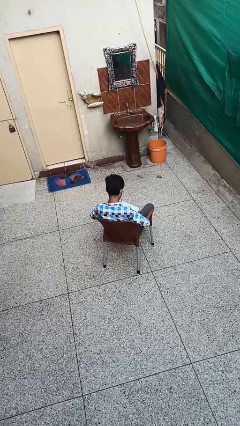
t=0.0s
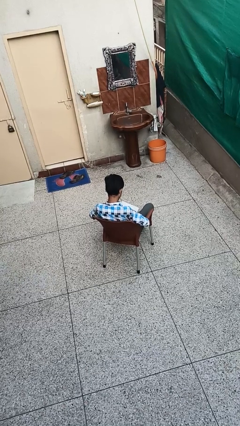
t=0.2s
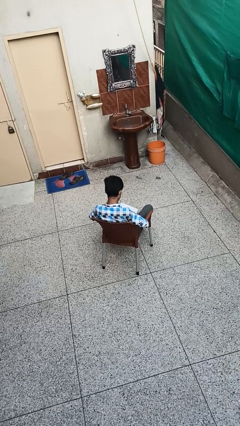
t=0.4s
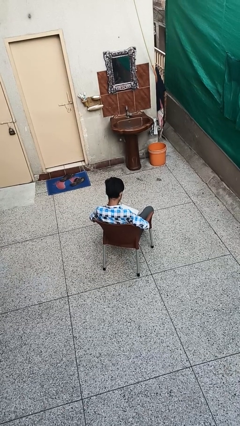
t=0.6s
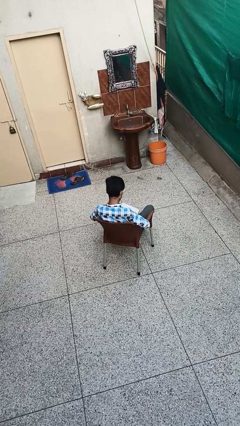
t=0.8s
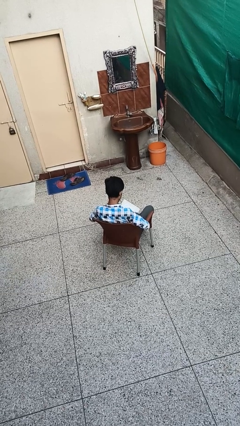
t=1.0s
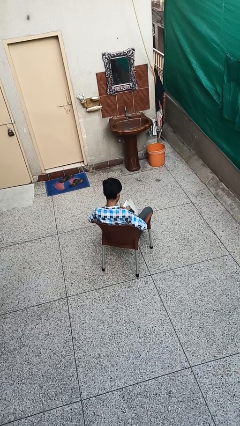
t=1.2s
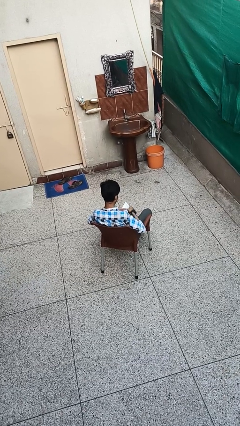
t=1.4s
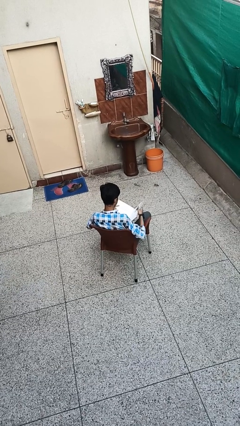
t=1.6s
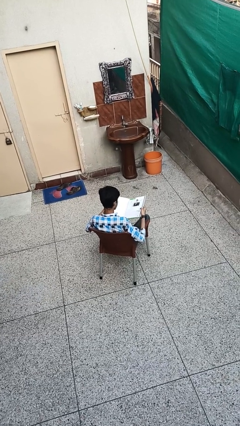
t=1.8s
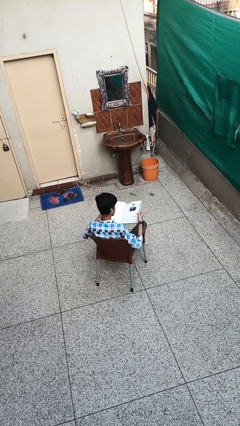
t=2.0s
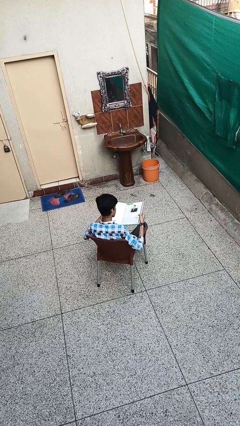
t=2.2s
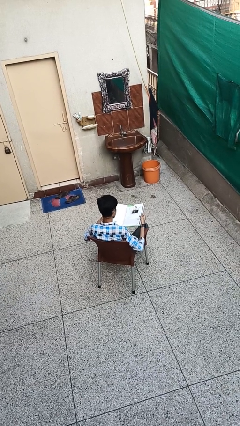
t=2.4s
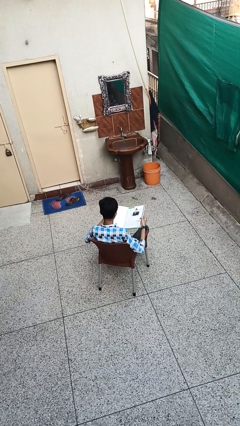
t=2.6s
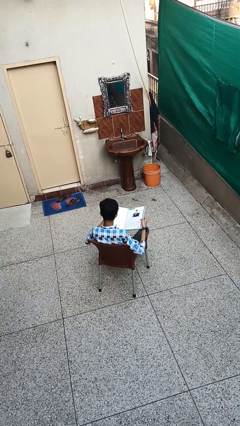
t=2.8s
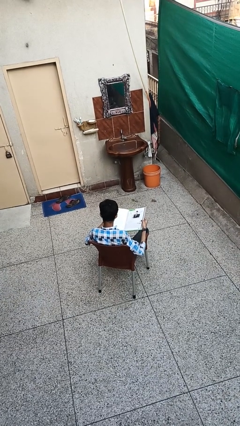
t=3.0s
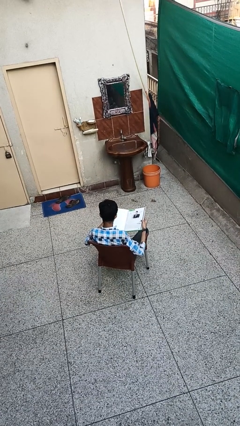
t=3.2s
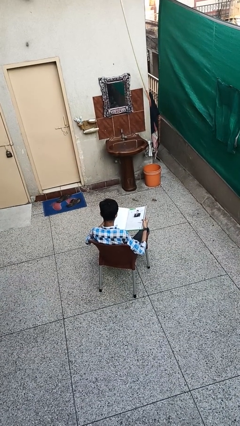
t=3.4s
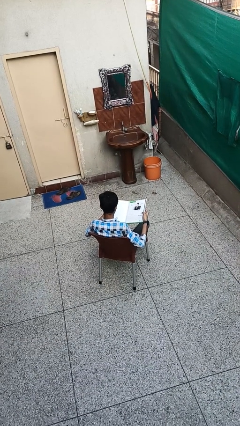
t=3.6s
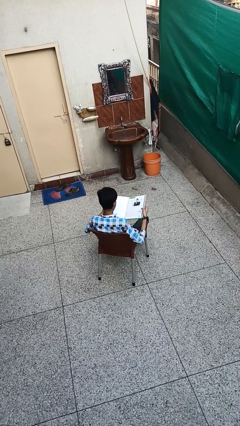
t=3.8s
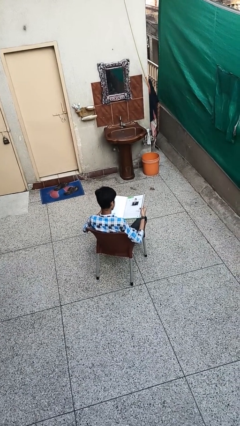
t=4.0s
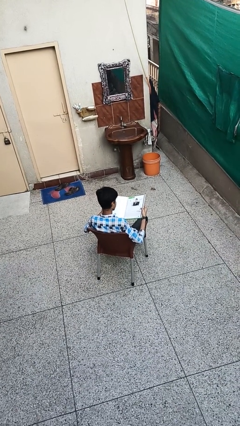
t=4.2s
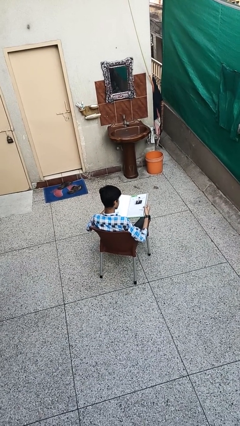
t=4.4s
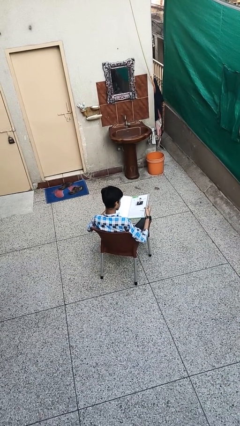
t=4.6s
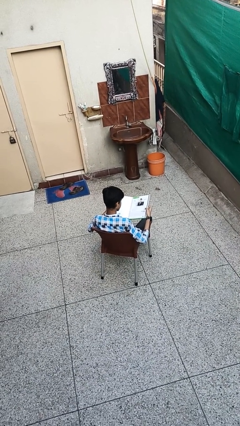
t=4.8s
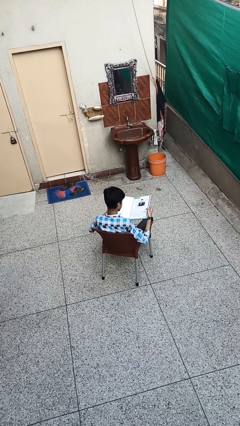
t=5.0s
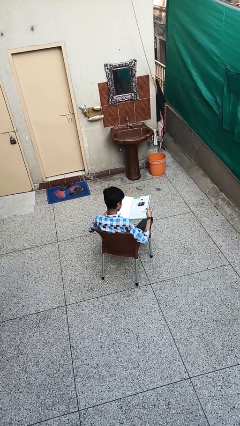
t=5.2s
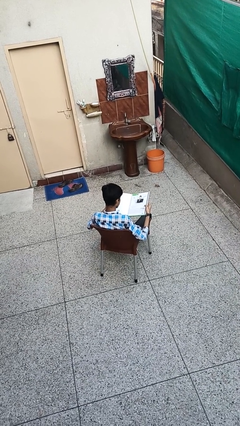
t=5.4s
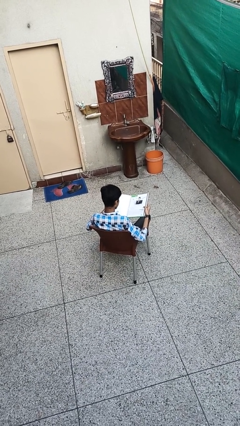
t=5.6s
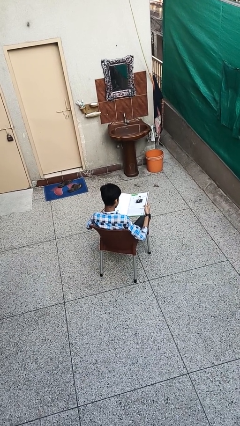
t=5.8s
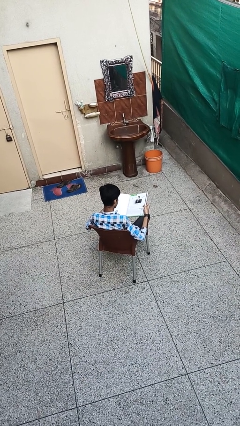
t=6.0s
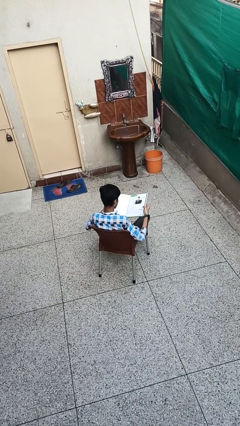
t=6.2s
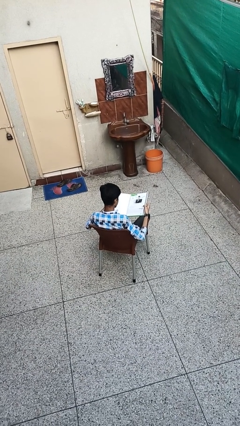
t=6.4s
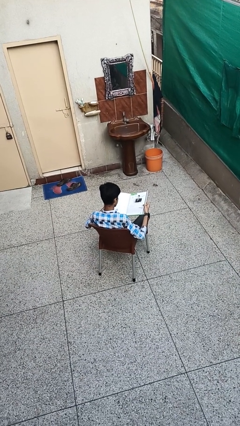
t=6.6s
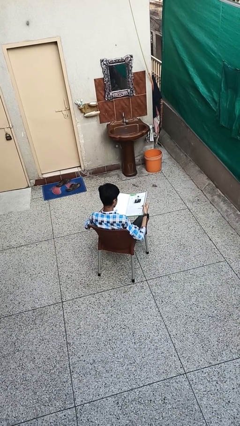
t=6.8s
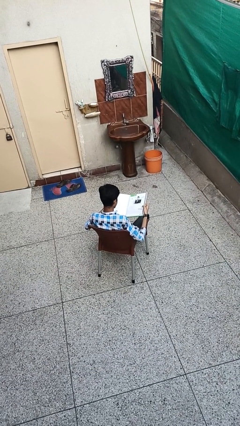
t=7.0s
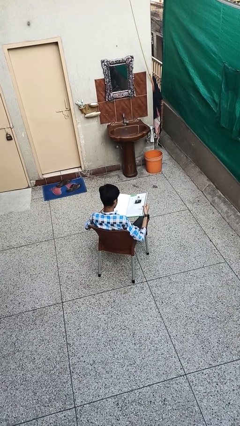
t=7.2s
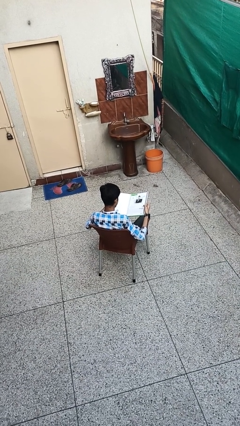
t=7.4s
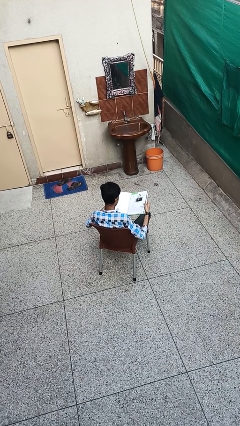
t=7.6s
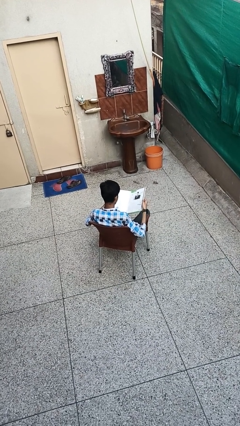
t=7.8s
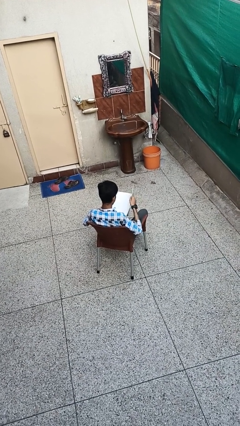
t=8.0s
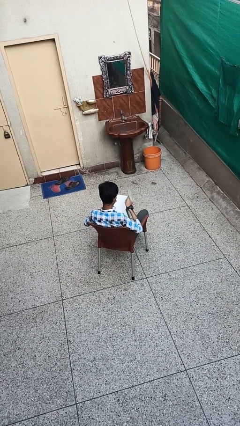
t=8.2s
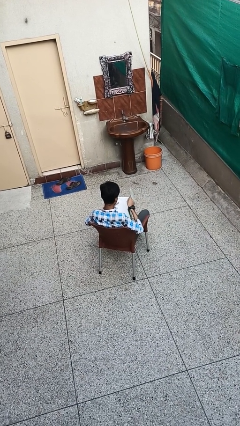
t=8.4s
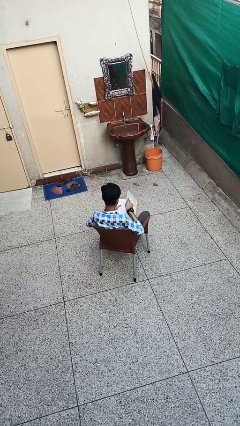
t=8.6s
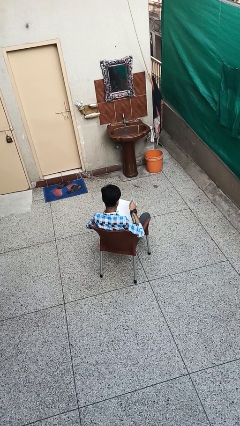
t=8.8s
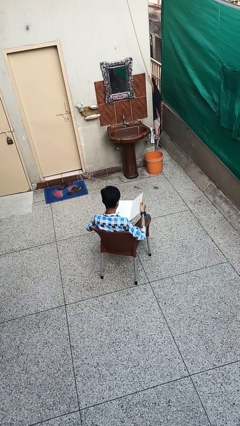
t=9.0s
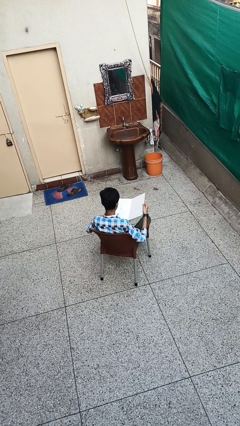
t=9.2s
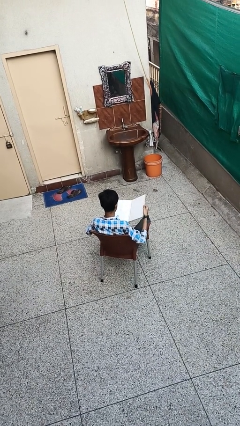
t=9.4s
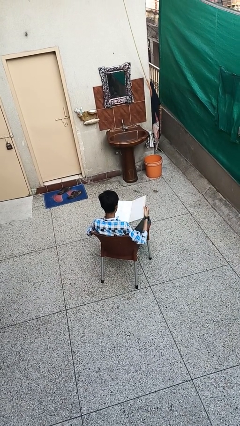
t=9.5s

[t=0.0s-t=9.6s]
person reads book

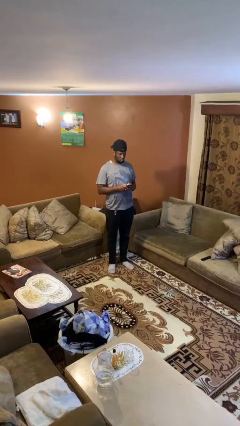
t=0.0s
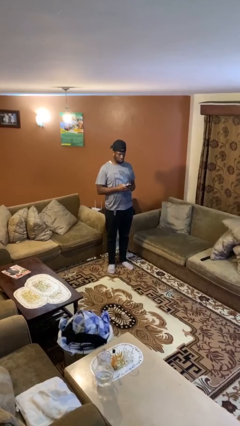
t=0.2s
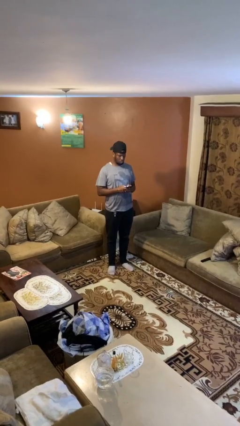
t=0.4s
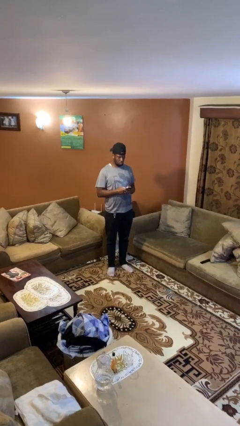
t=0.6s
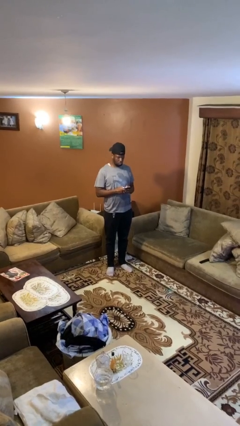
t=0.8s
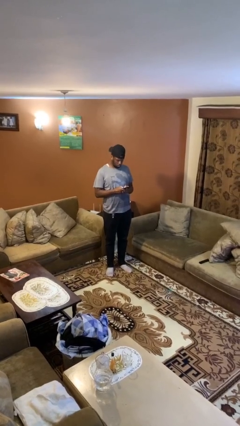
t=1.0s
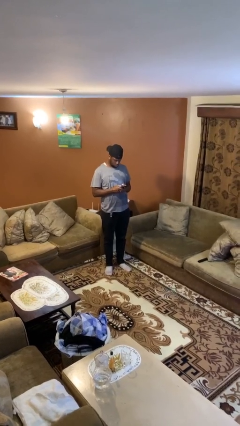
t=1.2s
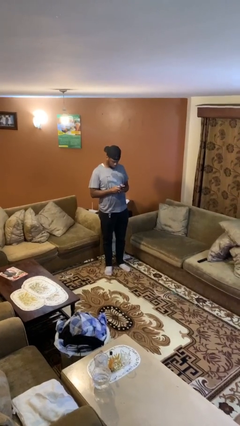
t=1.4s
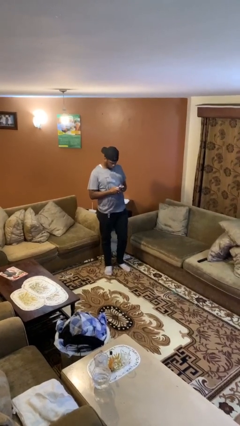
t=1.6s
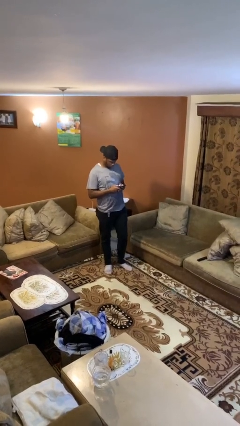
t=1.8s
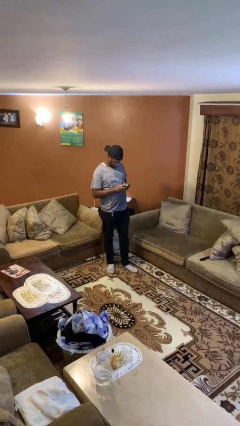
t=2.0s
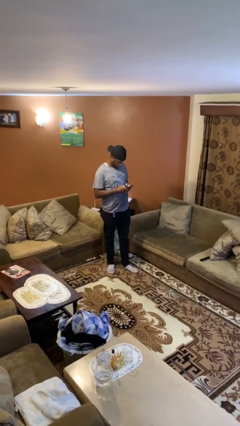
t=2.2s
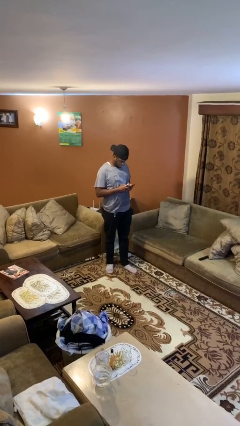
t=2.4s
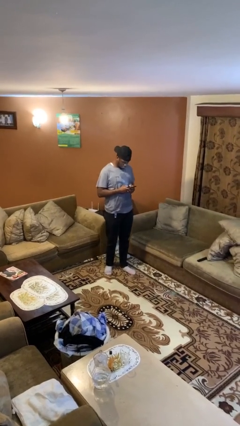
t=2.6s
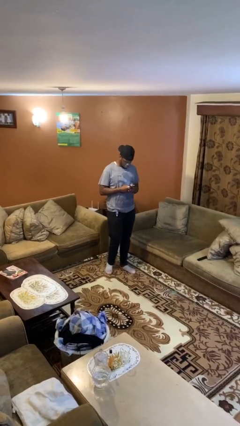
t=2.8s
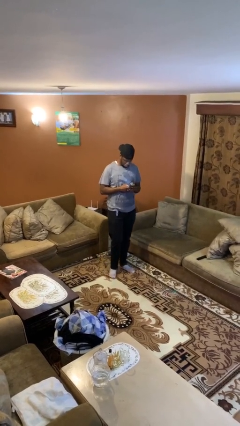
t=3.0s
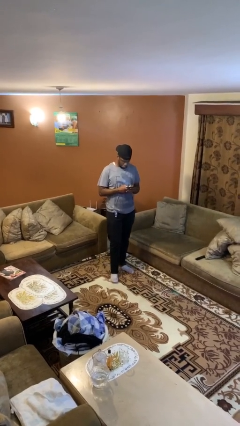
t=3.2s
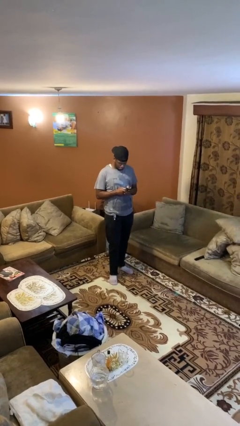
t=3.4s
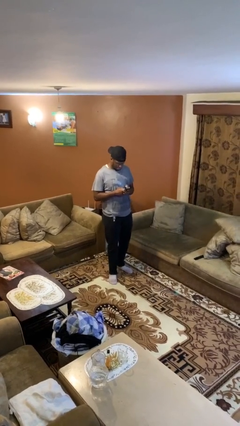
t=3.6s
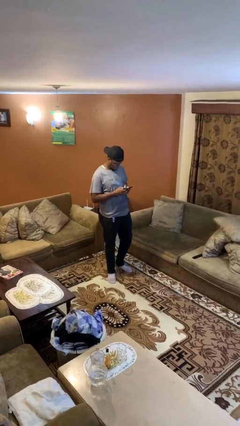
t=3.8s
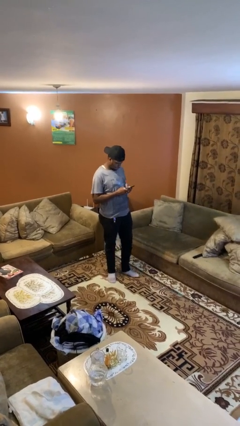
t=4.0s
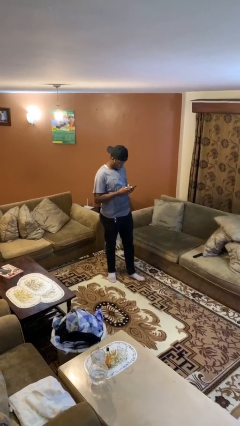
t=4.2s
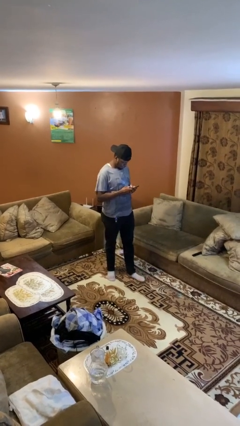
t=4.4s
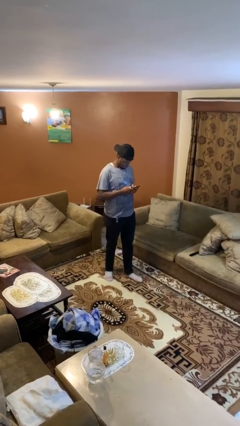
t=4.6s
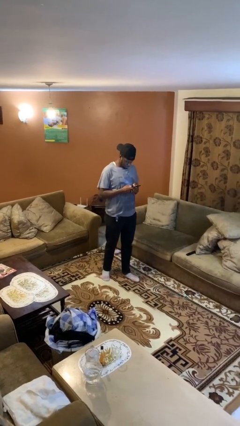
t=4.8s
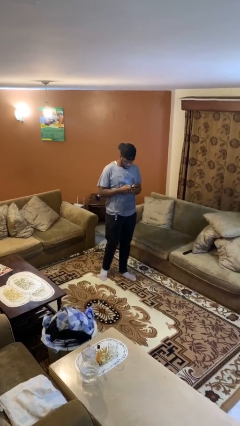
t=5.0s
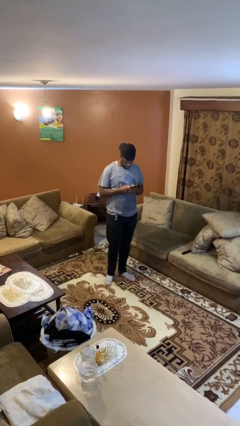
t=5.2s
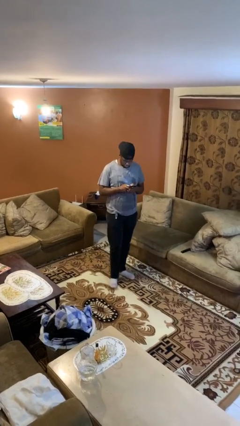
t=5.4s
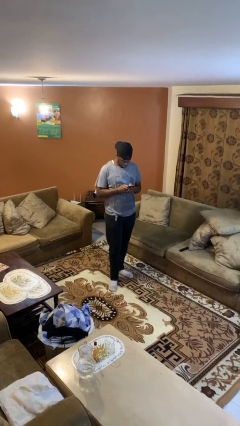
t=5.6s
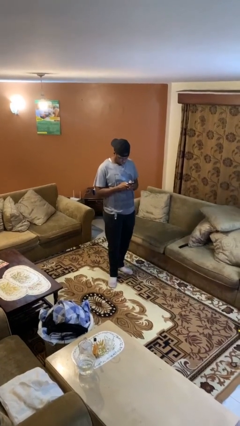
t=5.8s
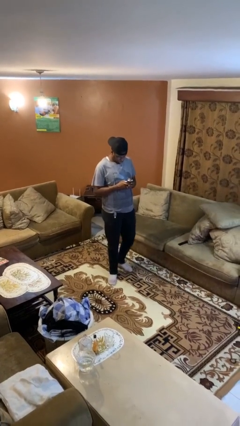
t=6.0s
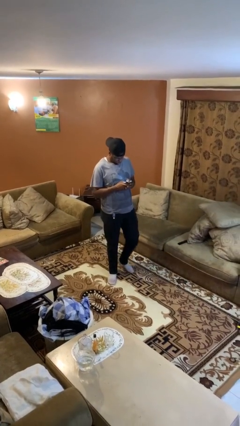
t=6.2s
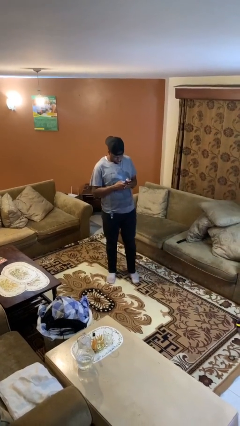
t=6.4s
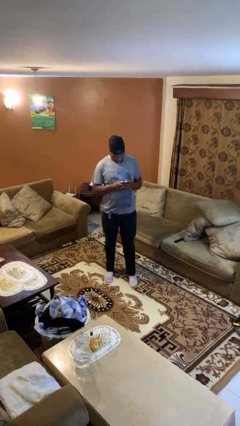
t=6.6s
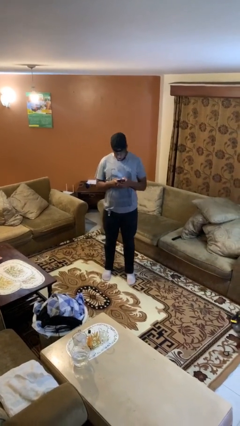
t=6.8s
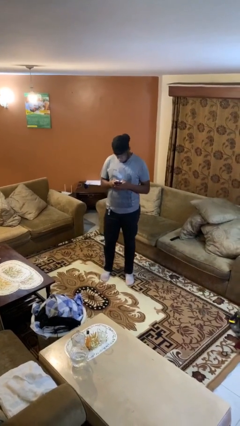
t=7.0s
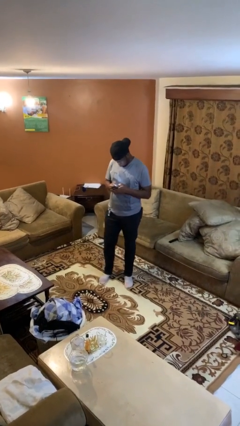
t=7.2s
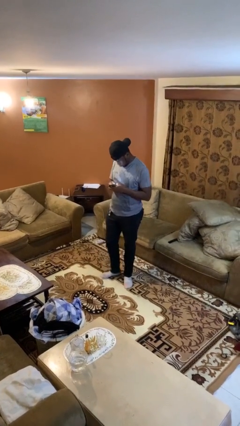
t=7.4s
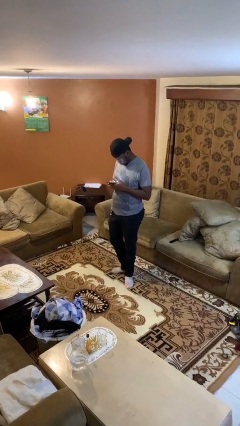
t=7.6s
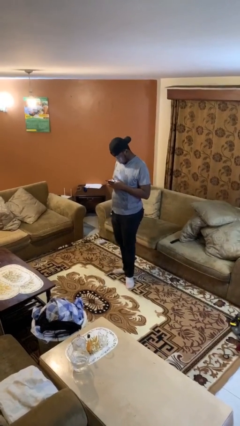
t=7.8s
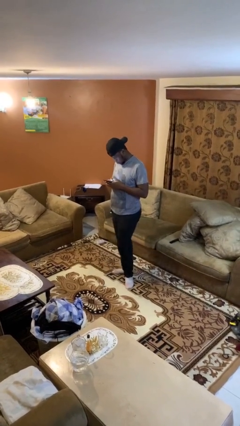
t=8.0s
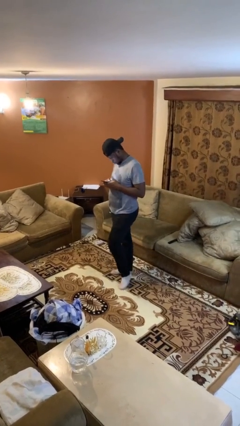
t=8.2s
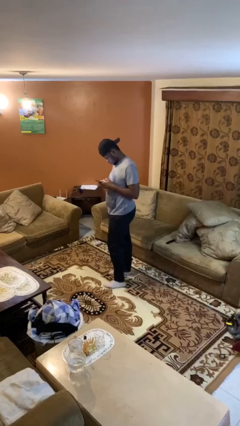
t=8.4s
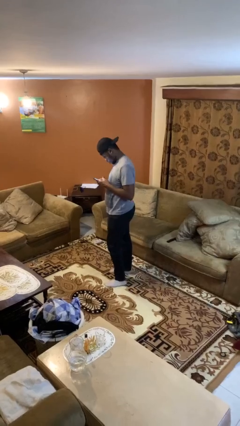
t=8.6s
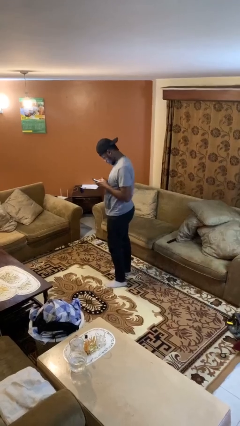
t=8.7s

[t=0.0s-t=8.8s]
person texts on phone
